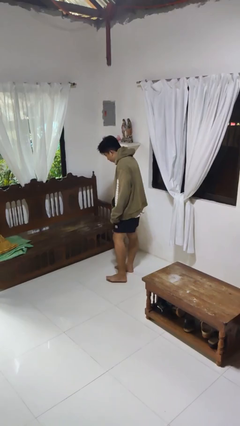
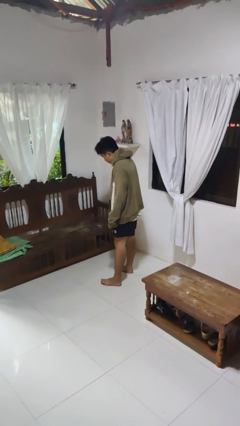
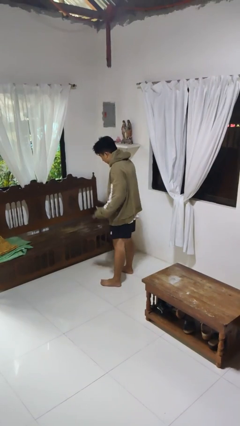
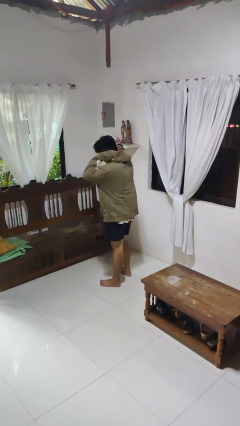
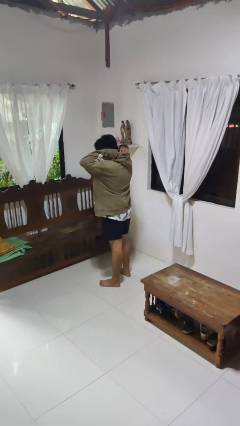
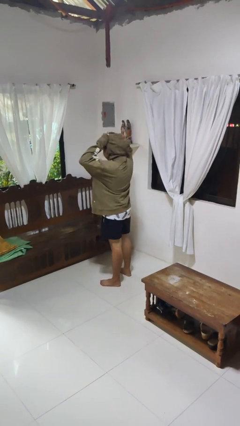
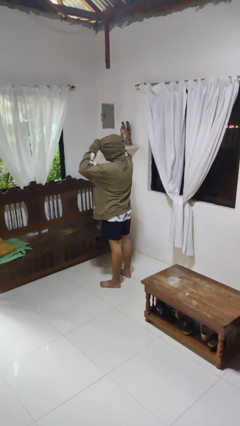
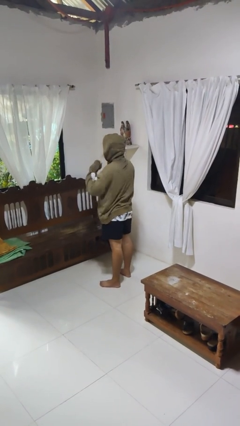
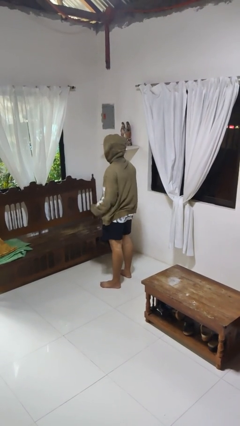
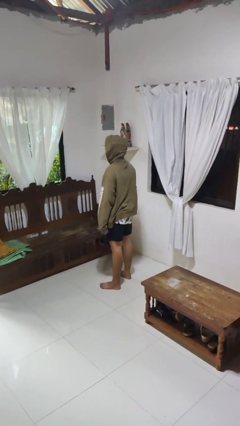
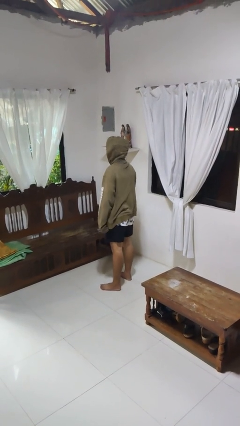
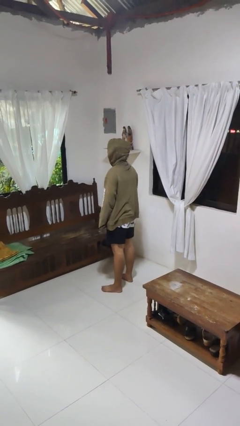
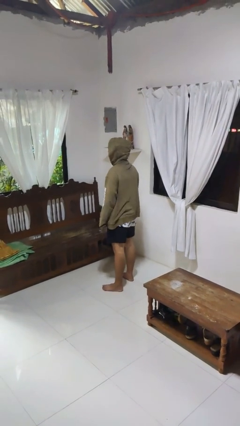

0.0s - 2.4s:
person puts on hoodie

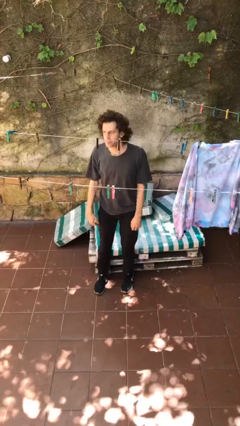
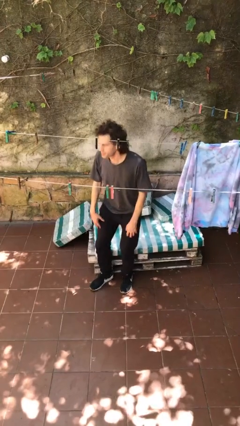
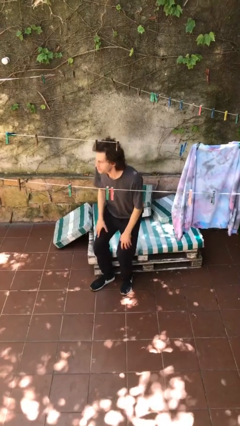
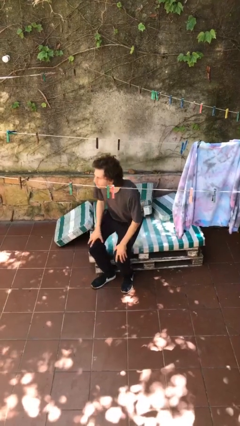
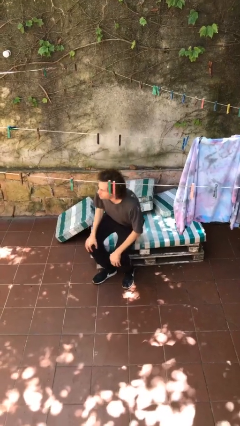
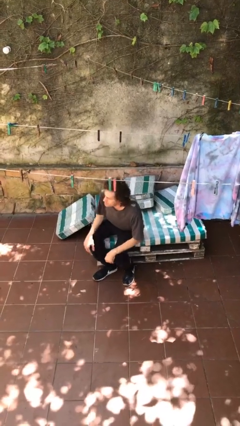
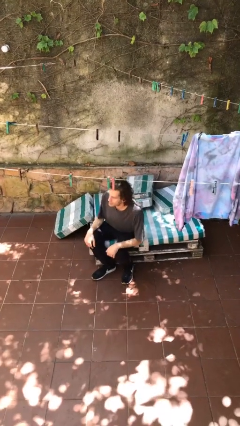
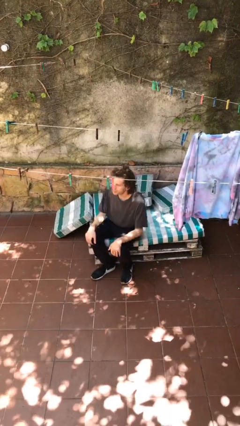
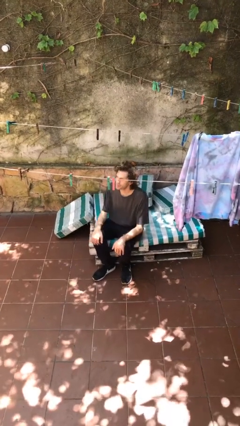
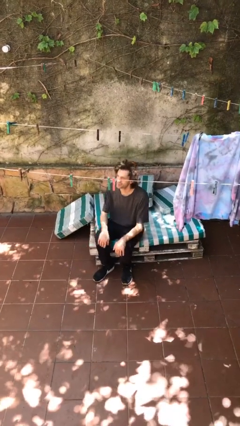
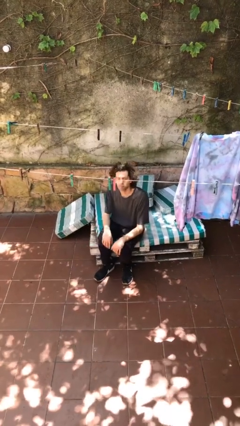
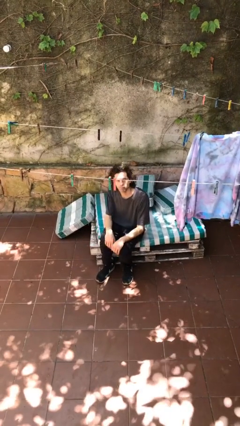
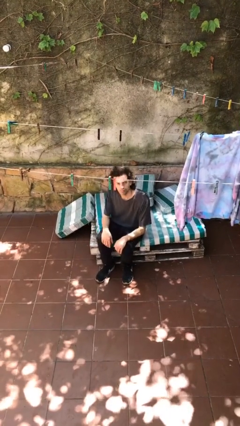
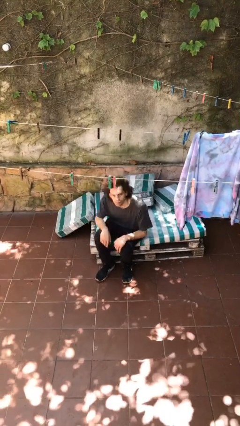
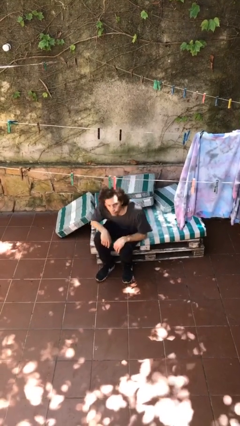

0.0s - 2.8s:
person sits down

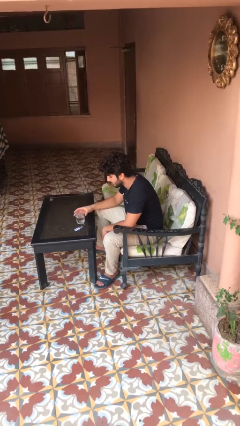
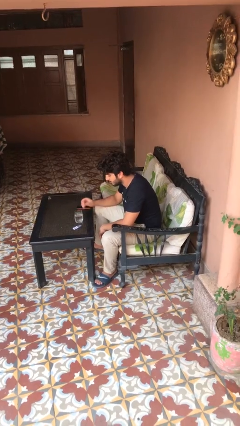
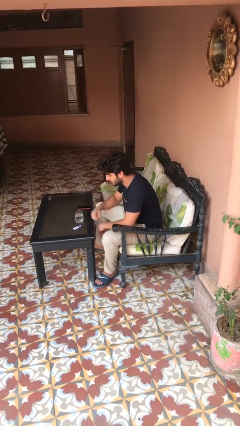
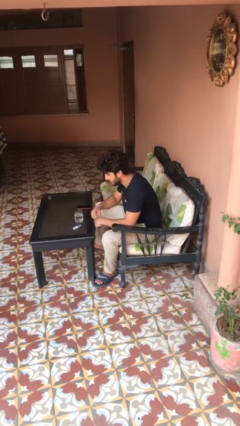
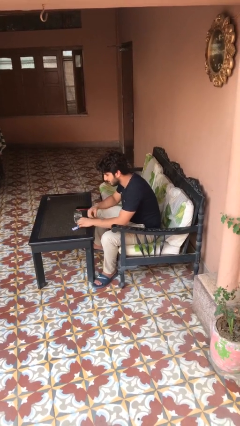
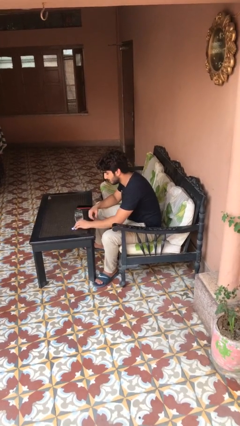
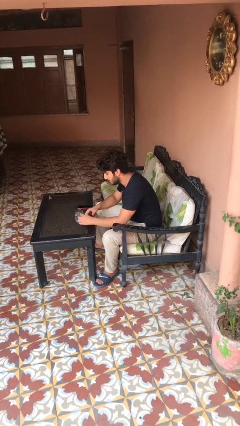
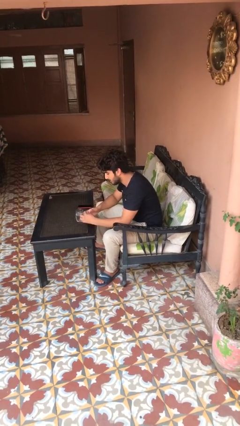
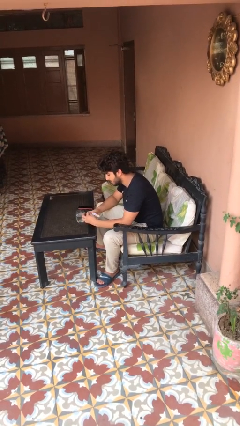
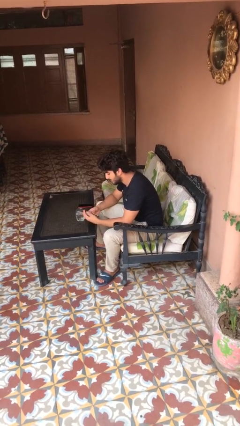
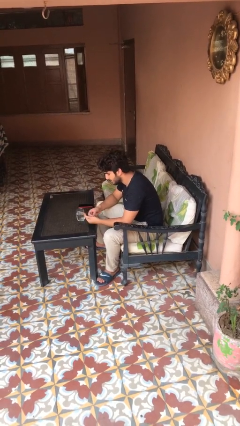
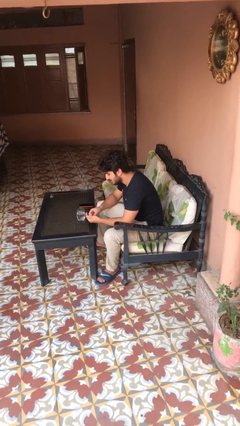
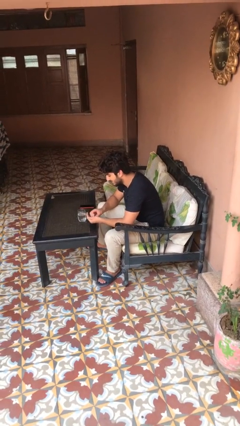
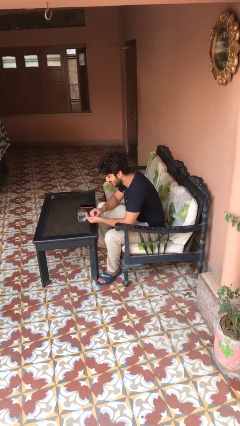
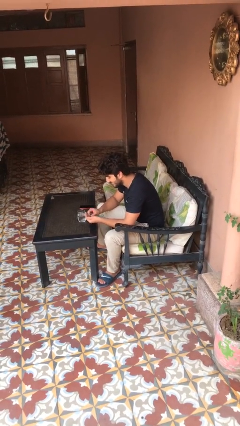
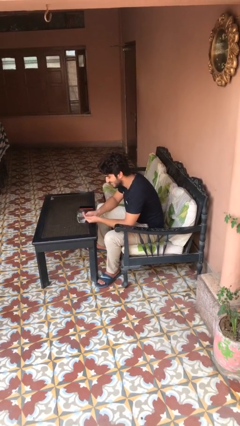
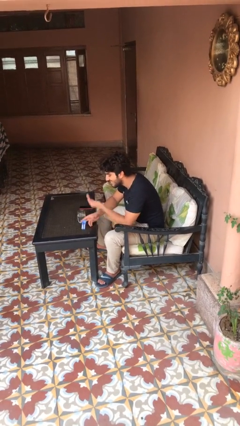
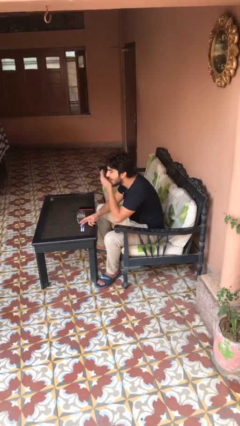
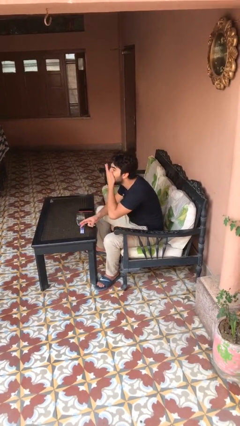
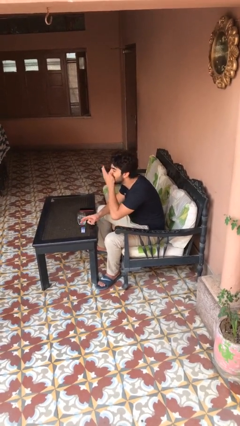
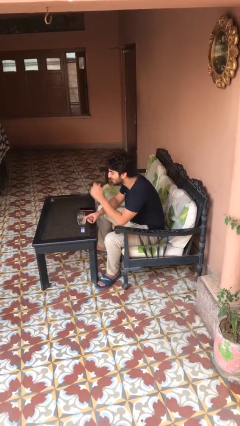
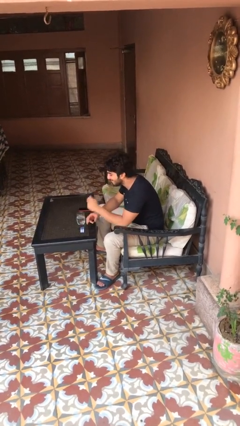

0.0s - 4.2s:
person takes medicine pills

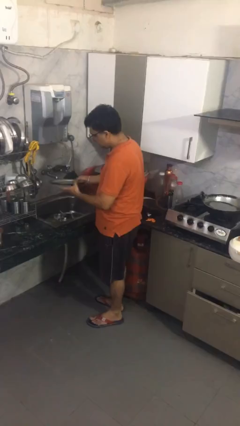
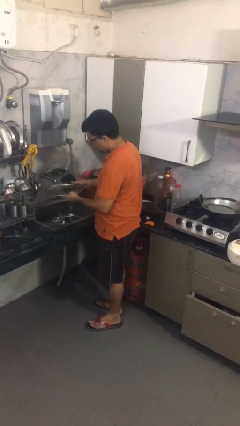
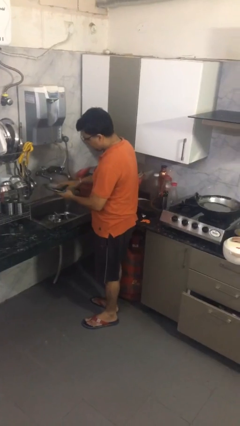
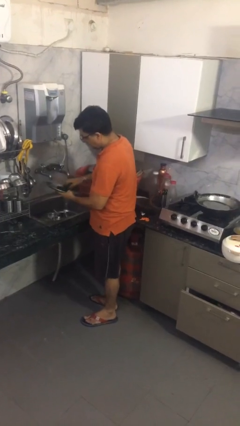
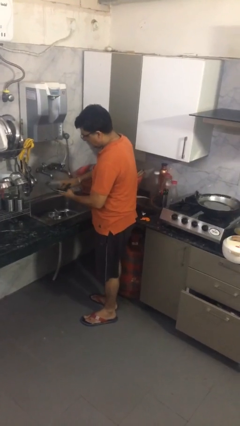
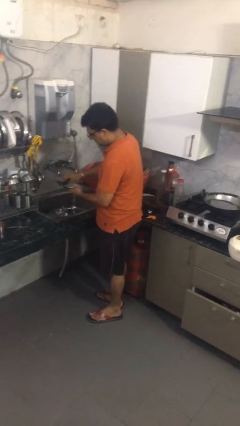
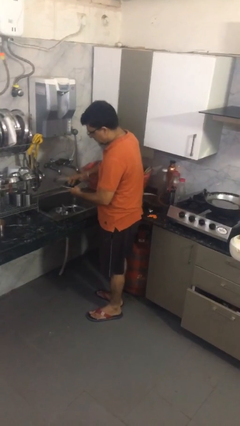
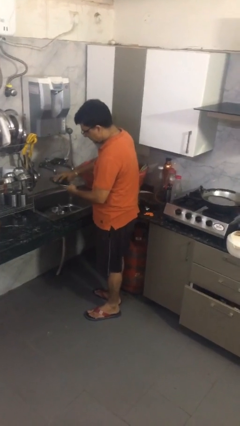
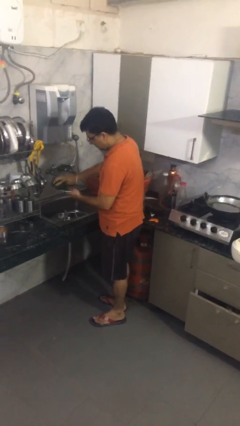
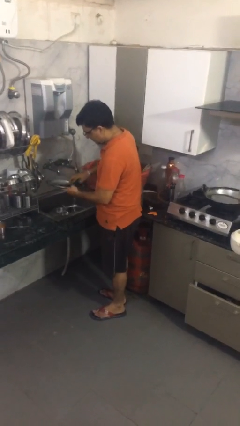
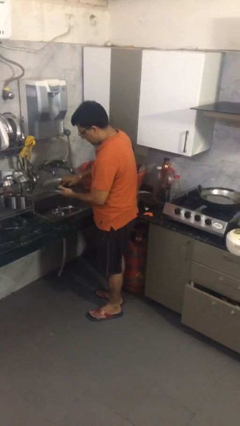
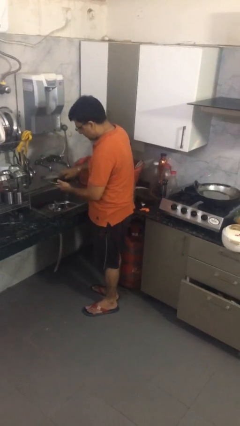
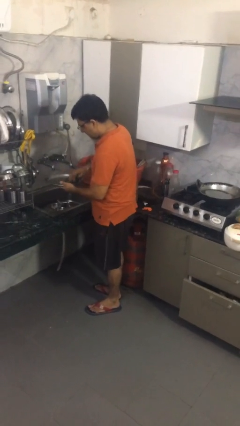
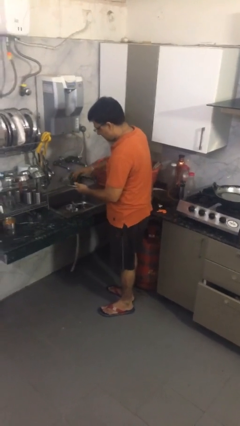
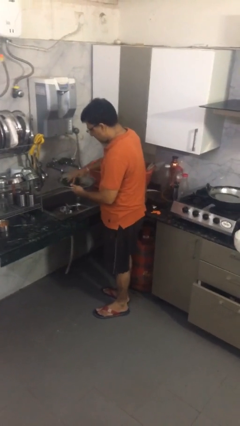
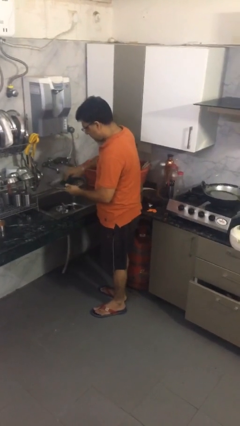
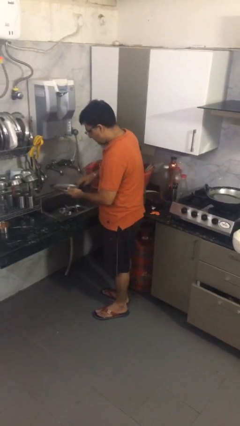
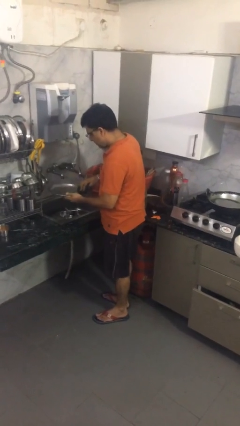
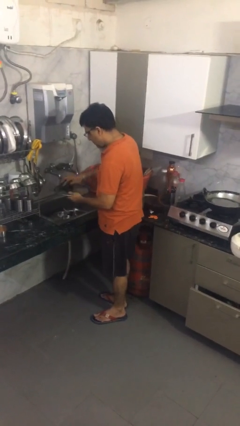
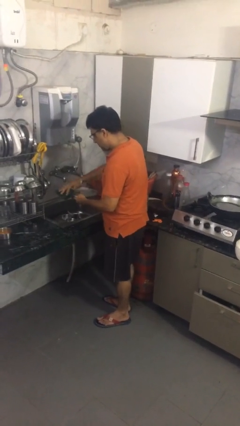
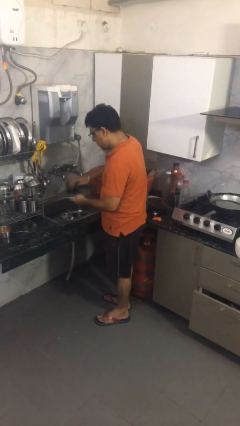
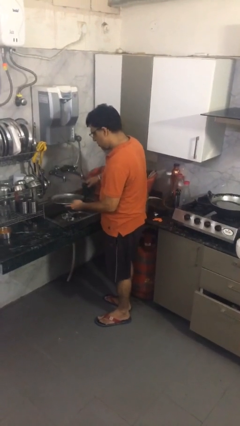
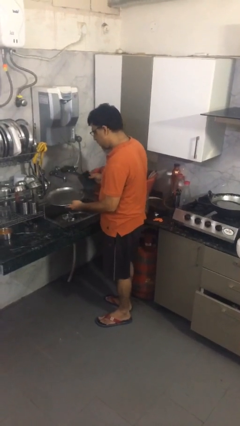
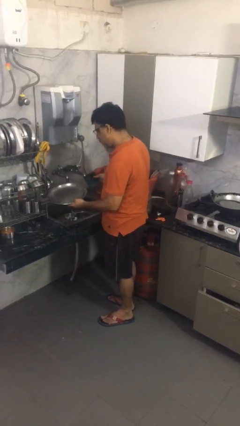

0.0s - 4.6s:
person washes dish

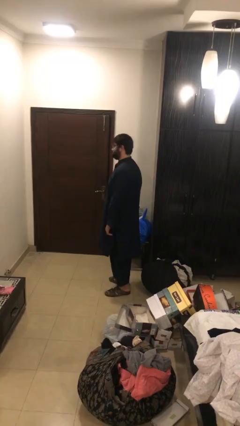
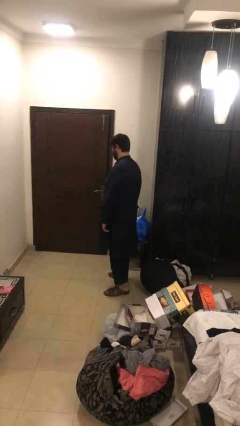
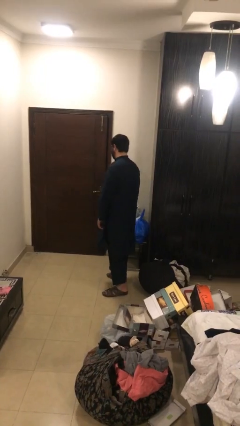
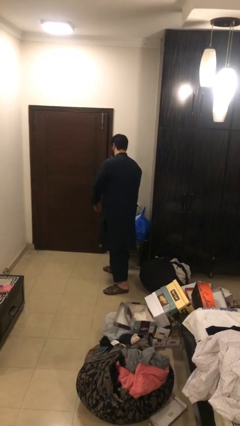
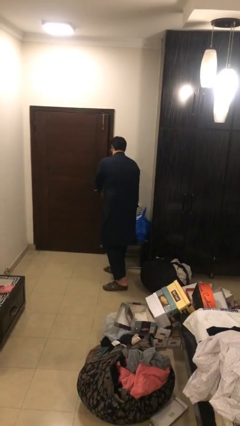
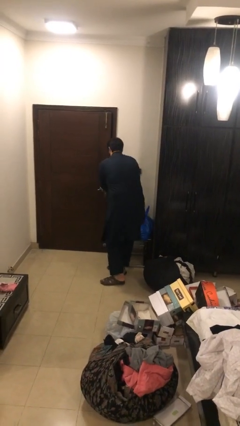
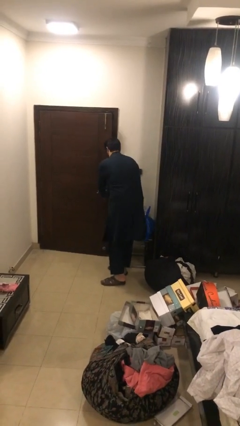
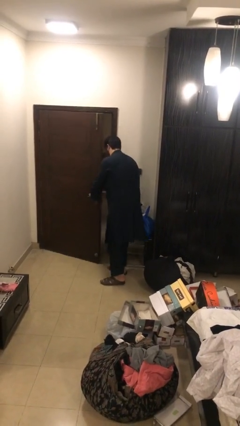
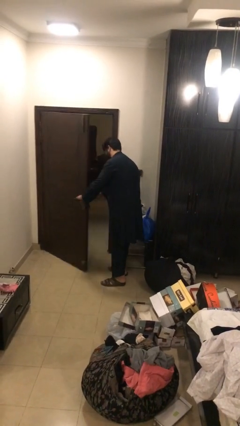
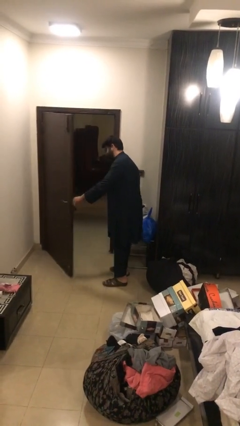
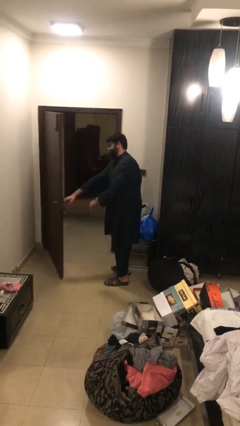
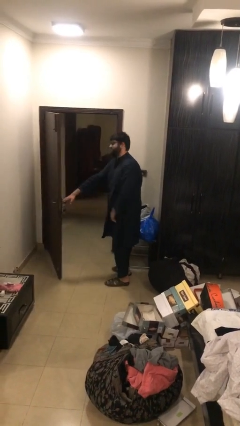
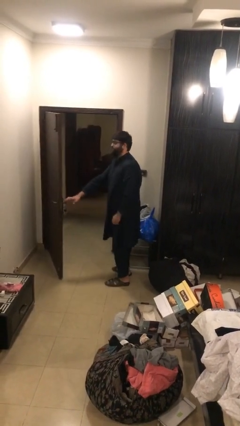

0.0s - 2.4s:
person opens facility door

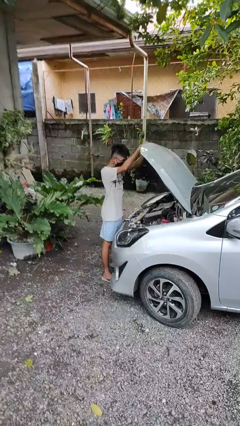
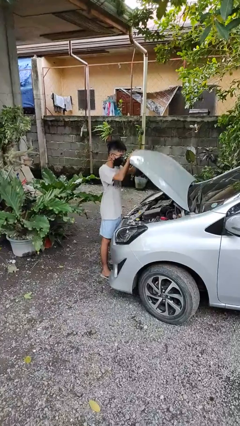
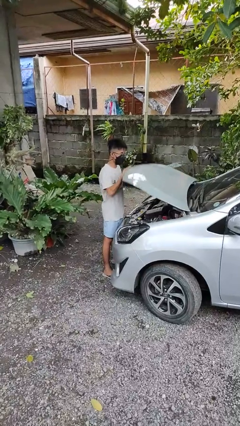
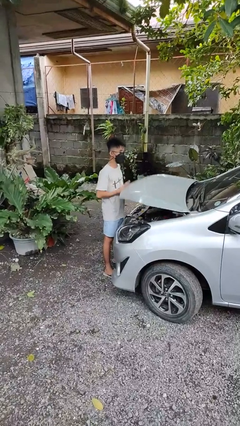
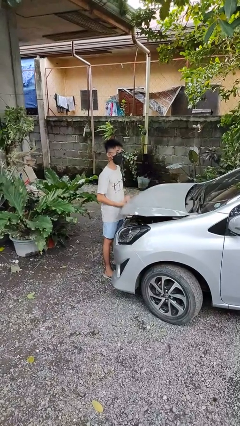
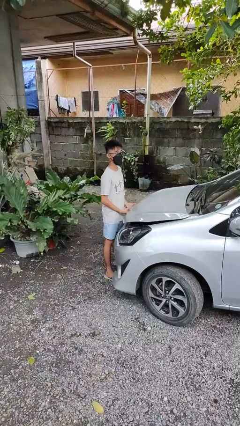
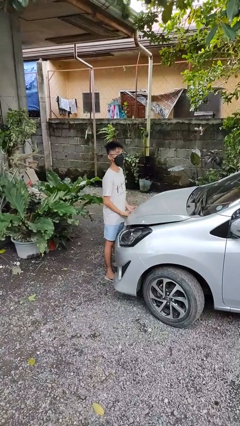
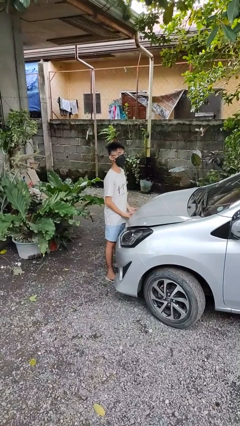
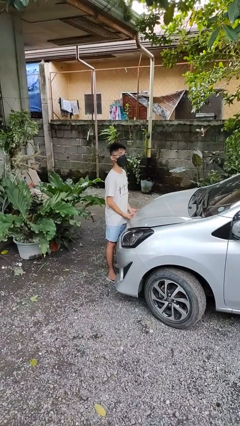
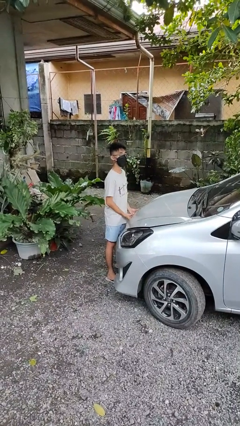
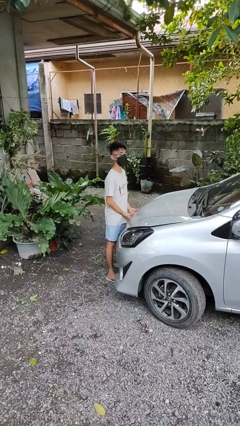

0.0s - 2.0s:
person closes car hood
